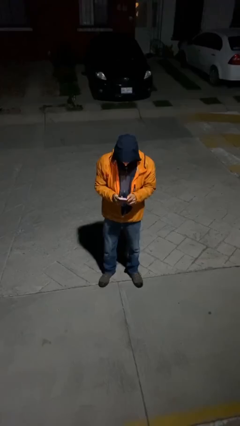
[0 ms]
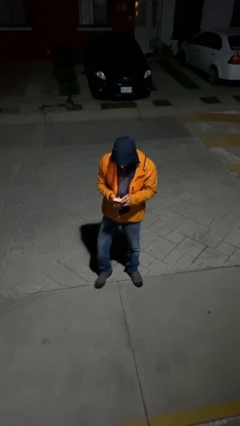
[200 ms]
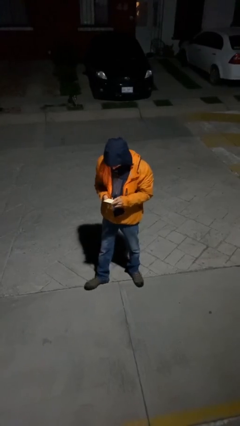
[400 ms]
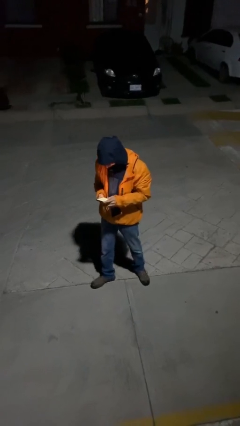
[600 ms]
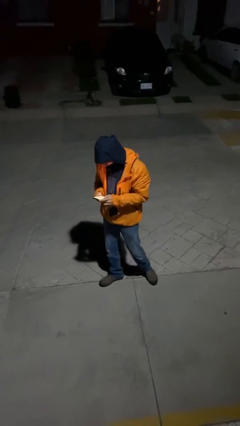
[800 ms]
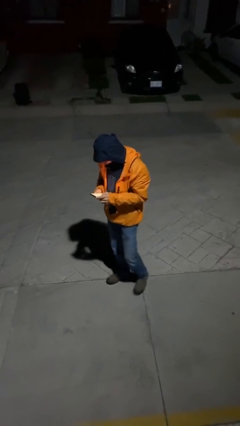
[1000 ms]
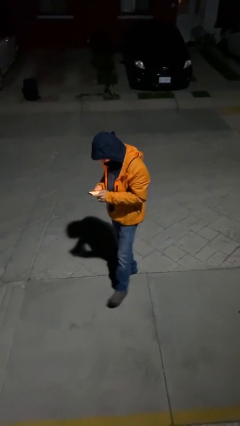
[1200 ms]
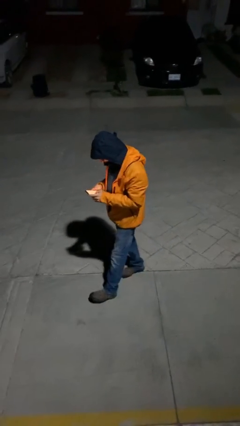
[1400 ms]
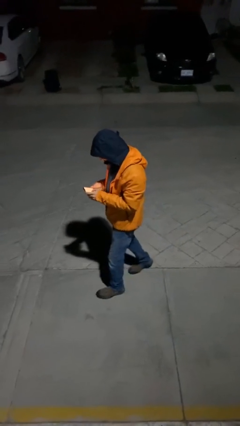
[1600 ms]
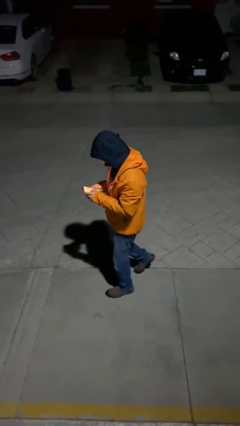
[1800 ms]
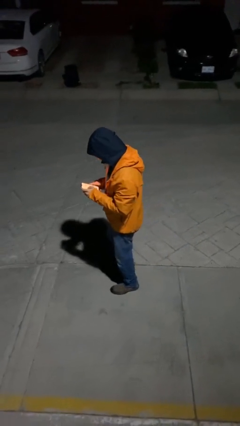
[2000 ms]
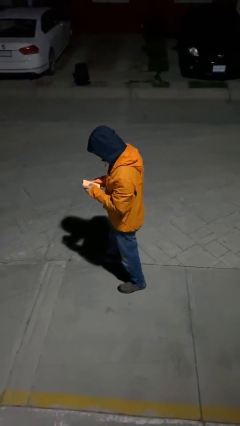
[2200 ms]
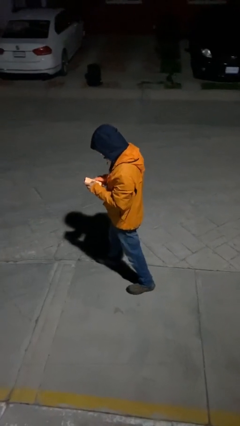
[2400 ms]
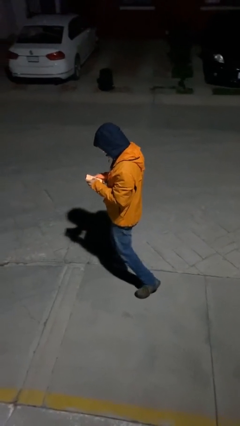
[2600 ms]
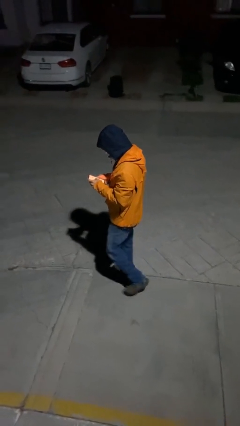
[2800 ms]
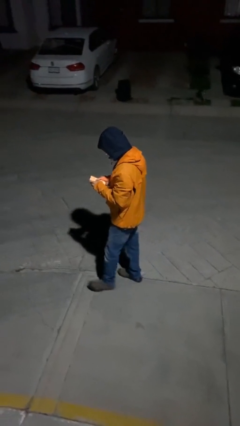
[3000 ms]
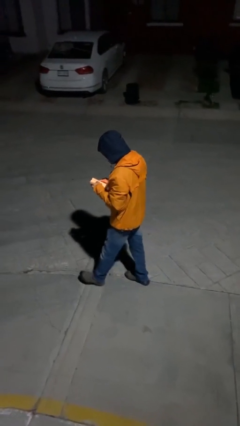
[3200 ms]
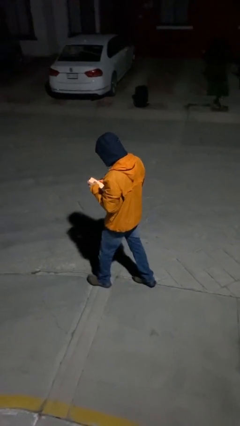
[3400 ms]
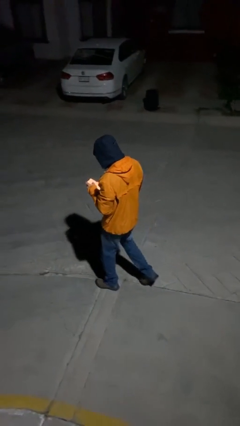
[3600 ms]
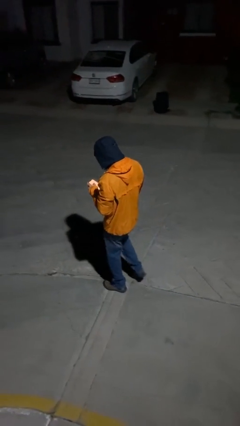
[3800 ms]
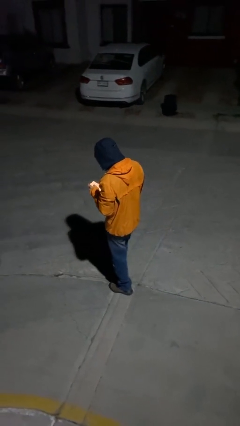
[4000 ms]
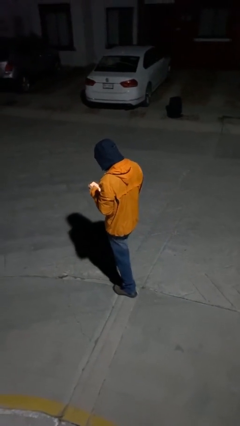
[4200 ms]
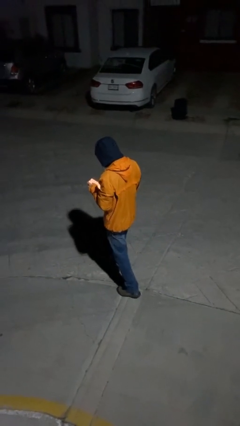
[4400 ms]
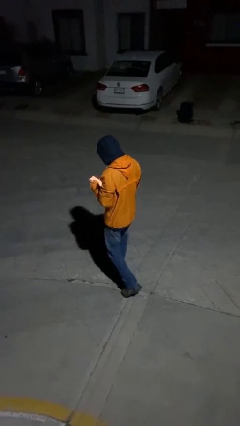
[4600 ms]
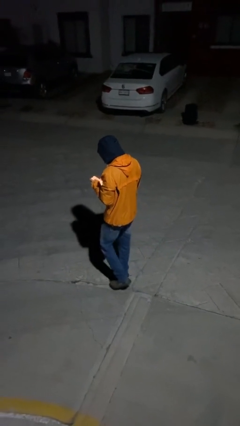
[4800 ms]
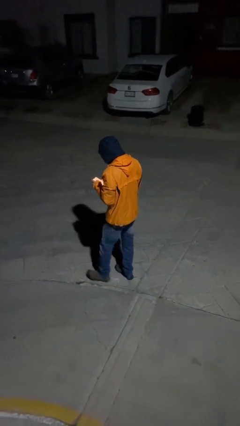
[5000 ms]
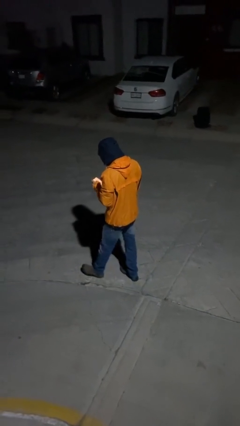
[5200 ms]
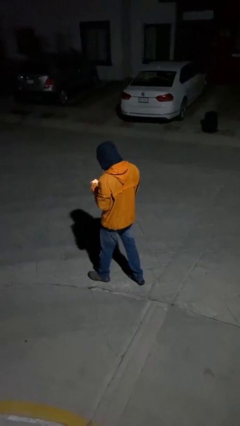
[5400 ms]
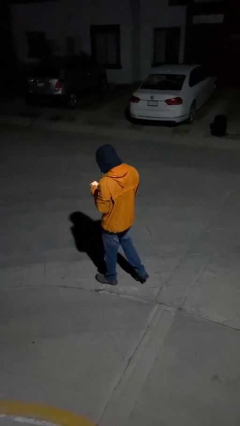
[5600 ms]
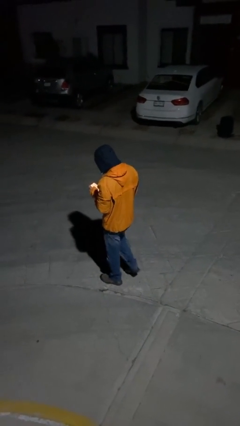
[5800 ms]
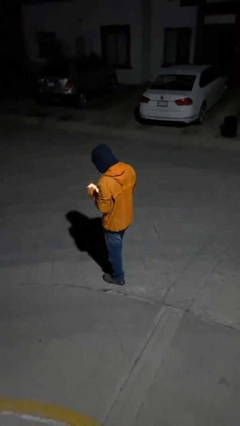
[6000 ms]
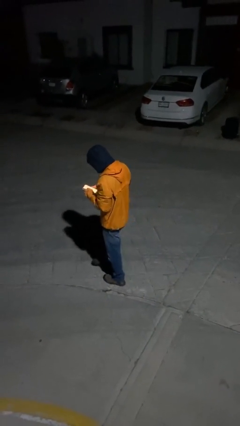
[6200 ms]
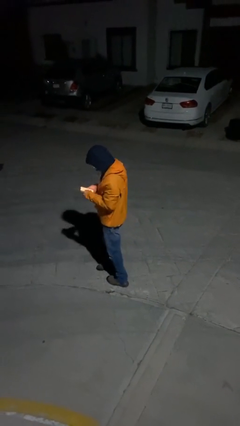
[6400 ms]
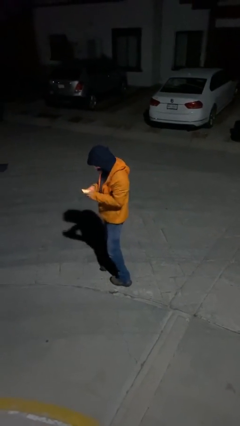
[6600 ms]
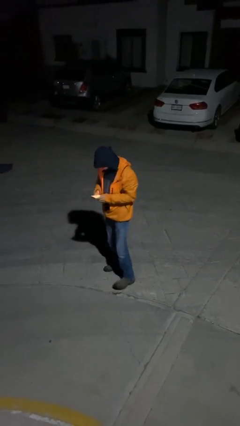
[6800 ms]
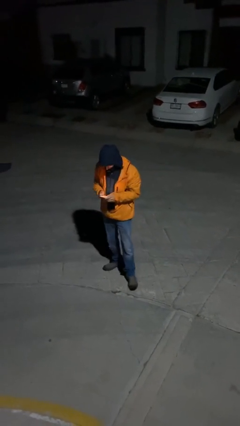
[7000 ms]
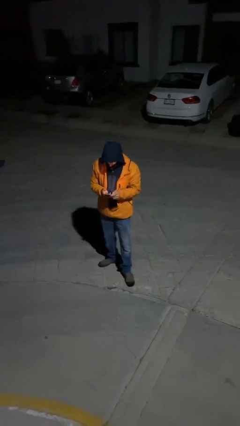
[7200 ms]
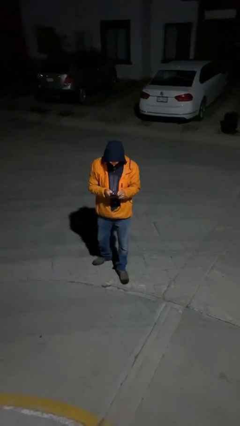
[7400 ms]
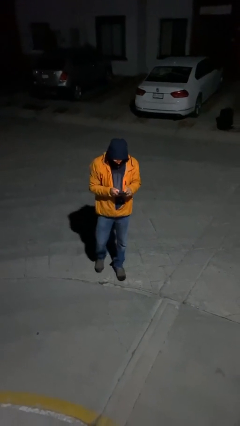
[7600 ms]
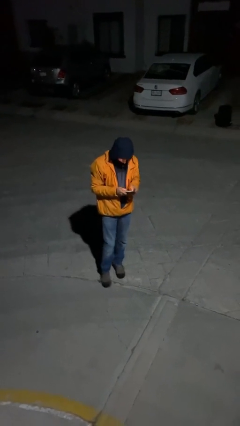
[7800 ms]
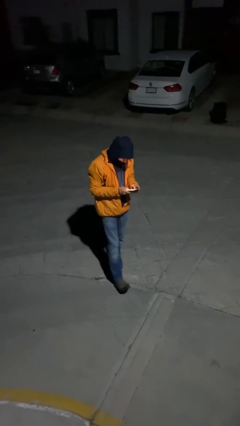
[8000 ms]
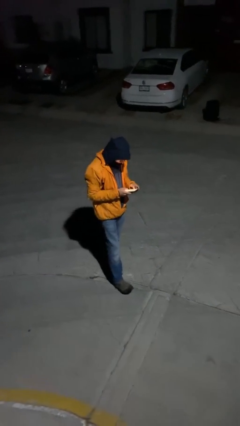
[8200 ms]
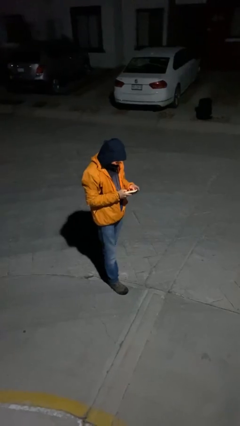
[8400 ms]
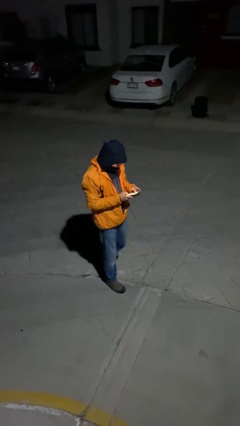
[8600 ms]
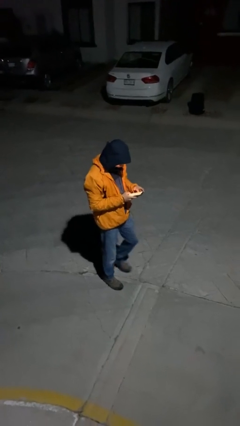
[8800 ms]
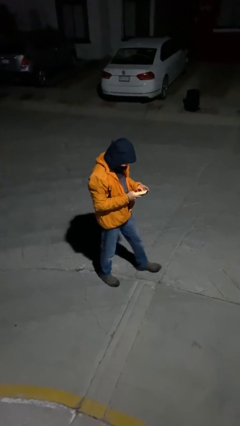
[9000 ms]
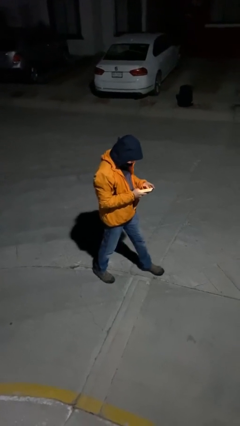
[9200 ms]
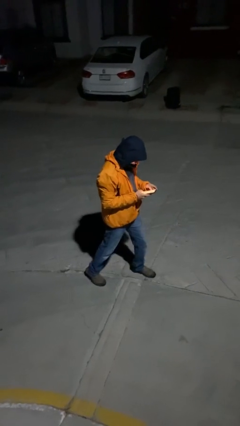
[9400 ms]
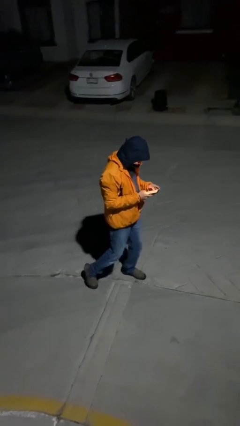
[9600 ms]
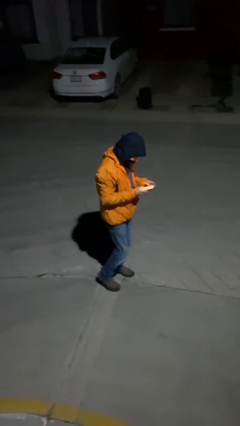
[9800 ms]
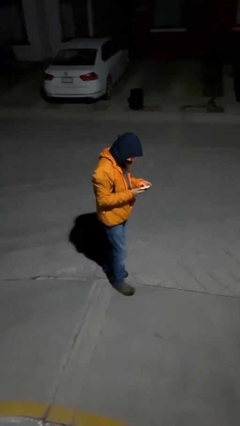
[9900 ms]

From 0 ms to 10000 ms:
person texts on phone

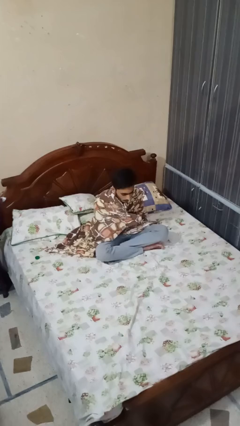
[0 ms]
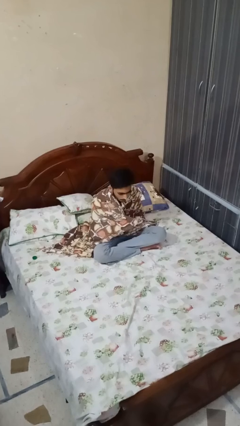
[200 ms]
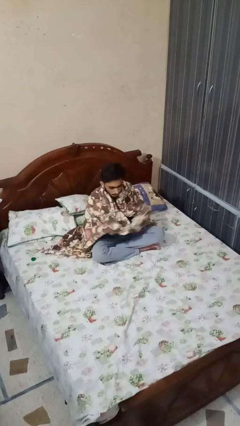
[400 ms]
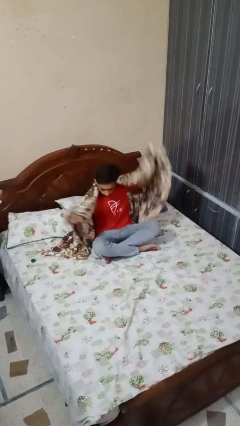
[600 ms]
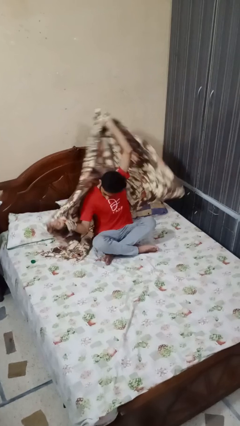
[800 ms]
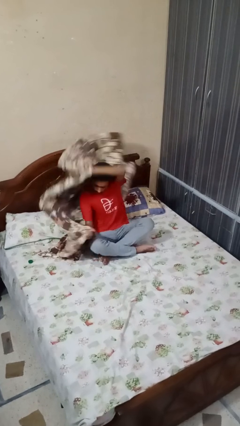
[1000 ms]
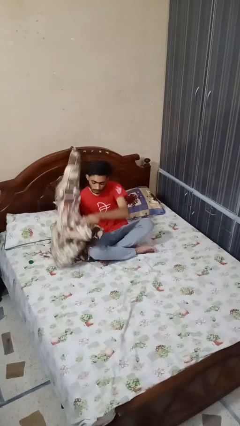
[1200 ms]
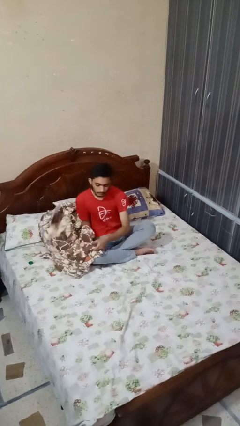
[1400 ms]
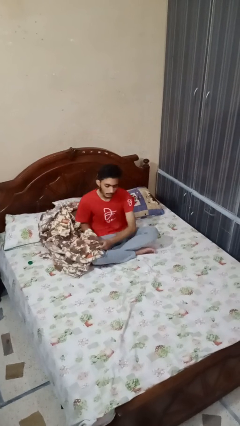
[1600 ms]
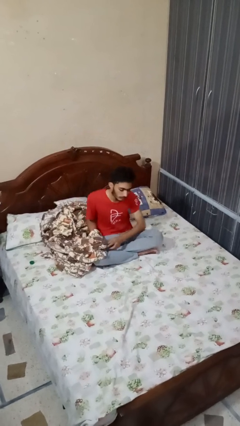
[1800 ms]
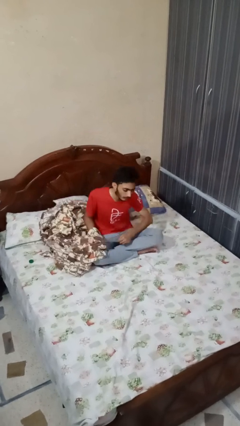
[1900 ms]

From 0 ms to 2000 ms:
person uncovers with blanket

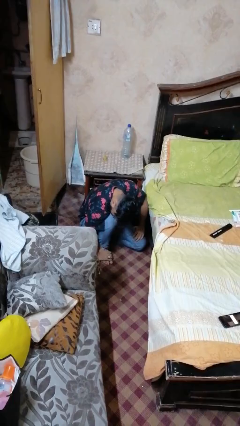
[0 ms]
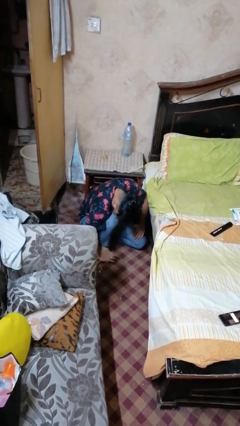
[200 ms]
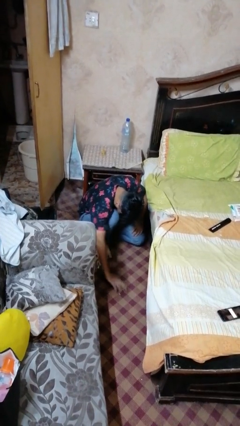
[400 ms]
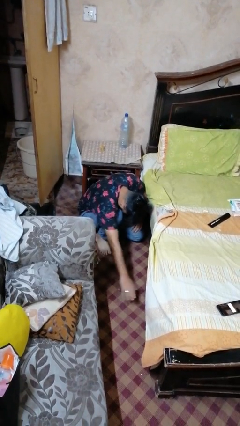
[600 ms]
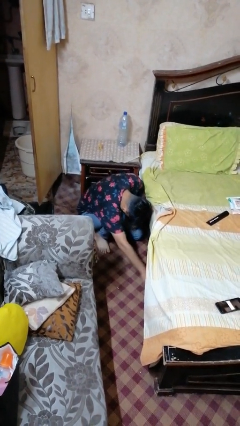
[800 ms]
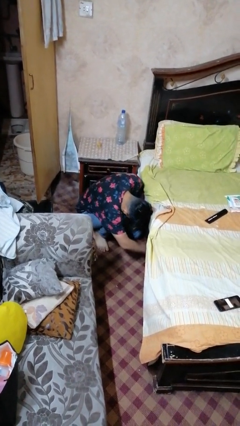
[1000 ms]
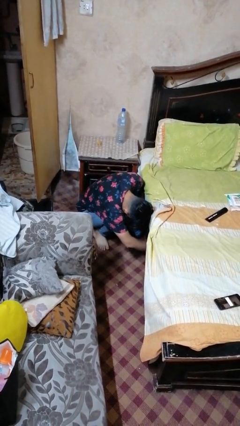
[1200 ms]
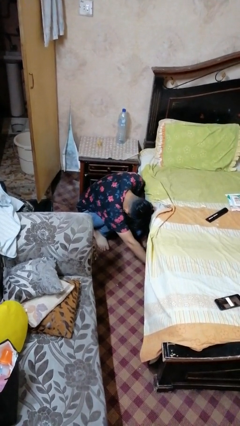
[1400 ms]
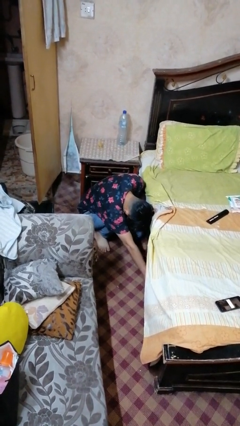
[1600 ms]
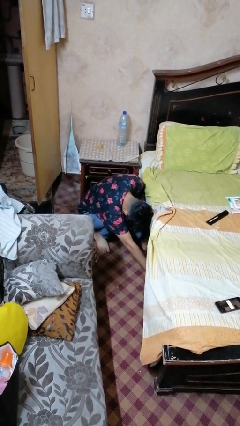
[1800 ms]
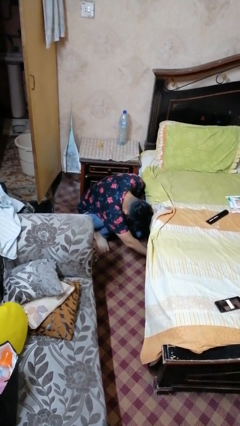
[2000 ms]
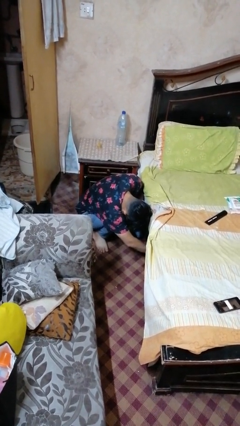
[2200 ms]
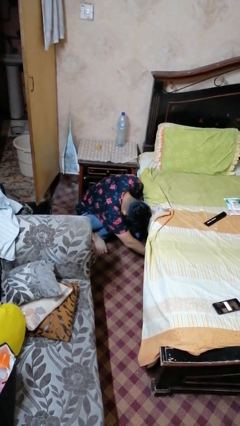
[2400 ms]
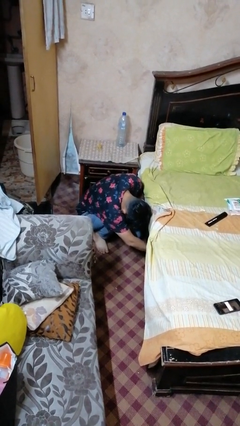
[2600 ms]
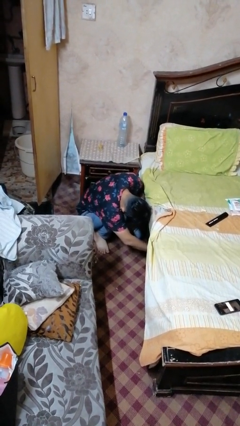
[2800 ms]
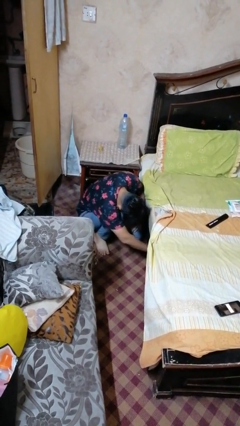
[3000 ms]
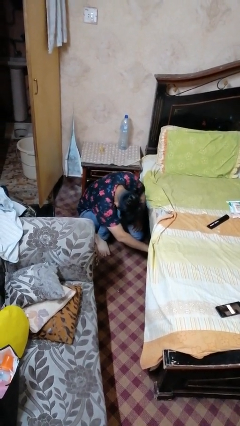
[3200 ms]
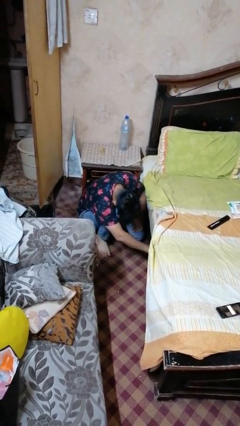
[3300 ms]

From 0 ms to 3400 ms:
person searches under bed

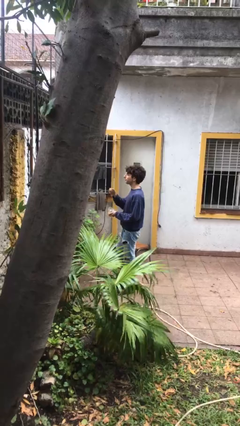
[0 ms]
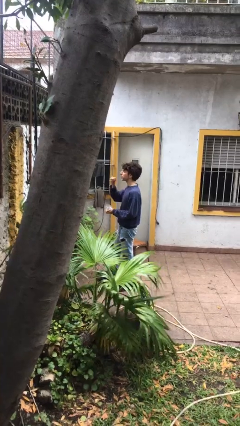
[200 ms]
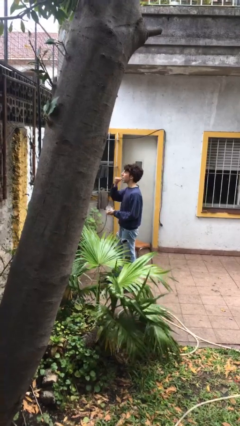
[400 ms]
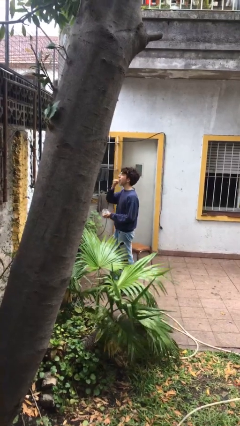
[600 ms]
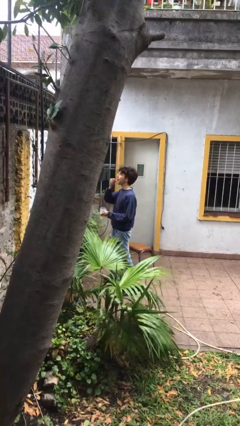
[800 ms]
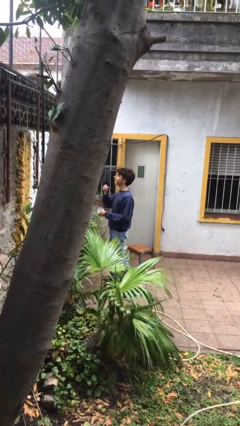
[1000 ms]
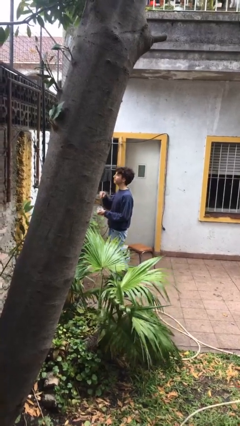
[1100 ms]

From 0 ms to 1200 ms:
person eats snack from bag

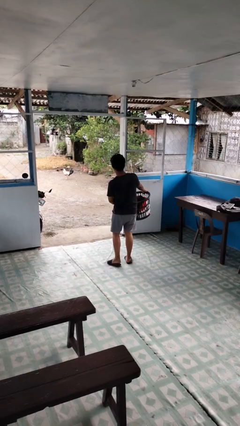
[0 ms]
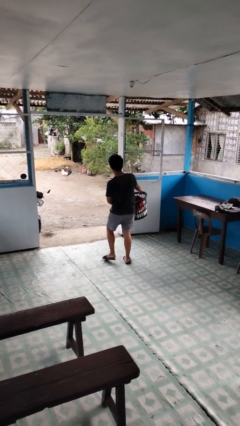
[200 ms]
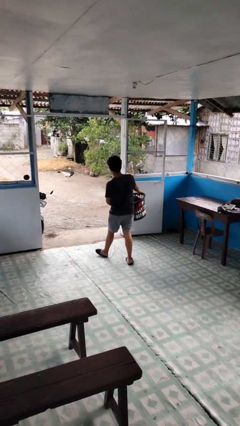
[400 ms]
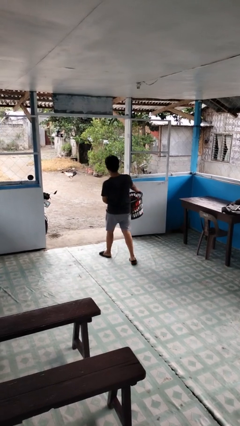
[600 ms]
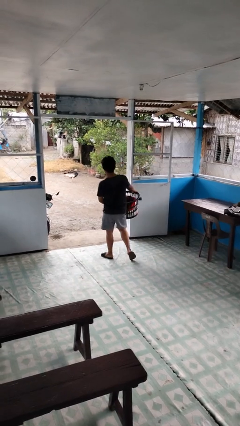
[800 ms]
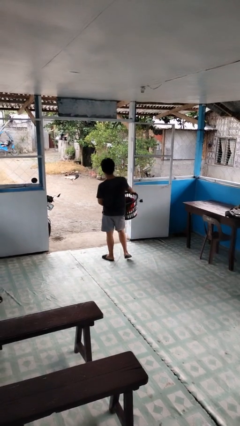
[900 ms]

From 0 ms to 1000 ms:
person carries laundry basket

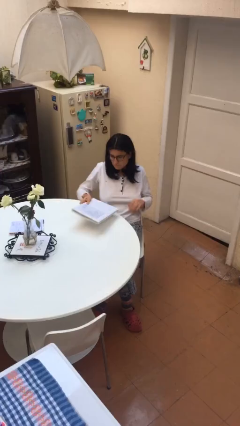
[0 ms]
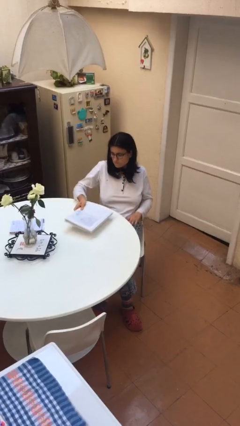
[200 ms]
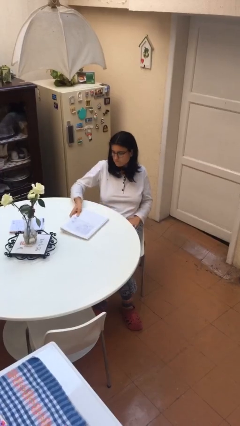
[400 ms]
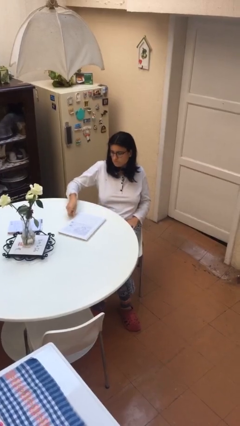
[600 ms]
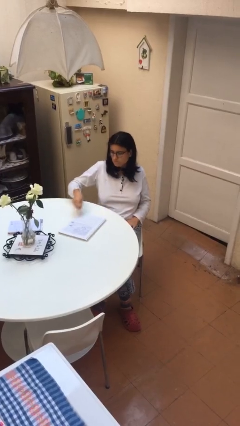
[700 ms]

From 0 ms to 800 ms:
person puts down object on table
